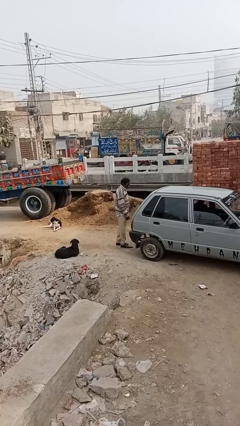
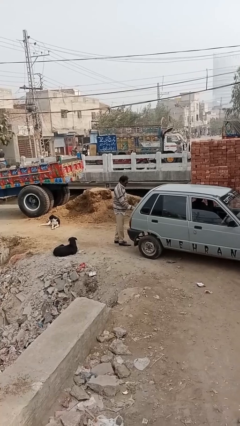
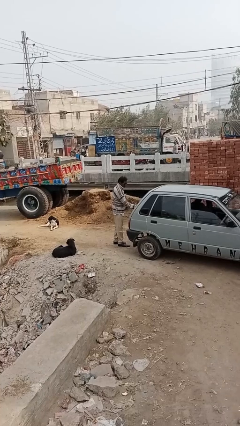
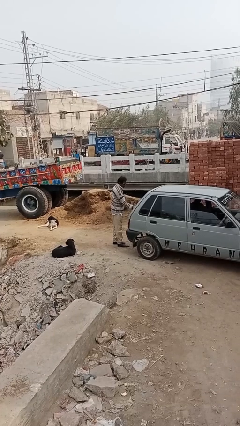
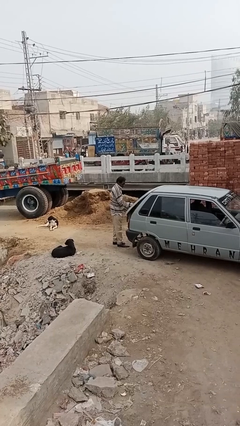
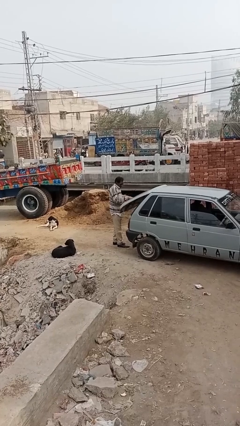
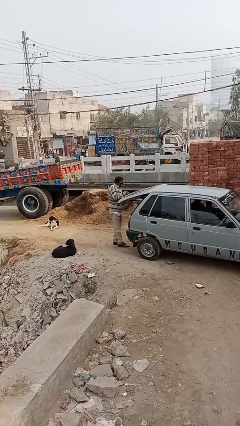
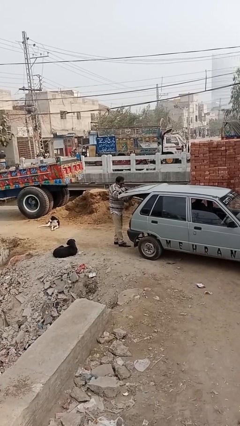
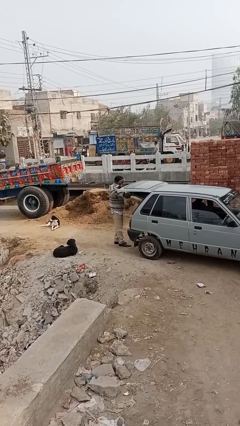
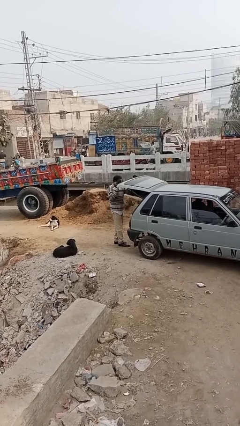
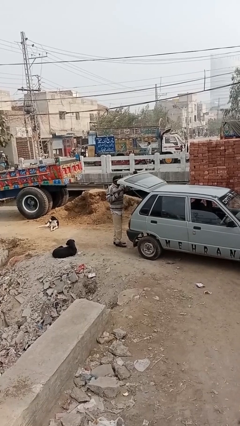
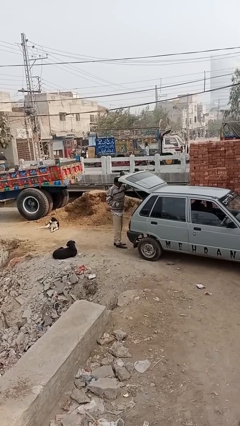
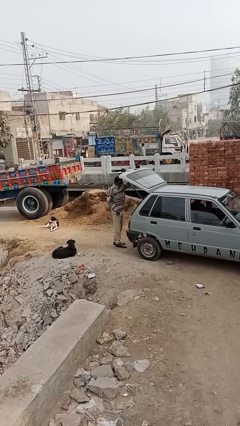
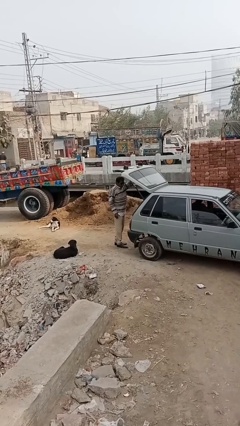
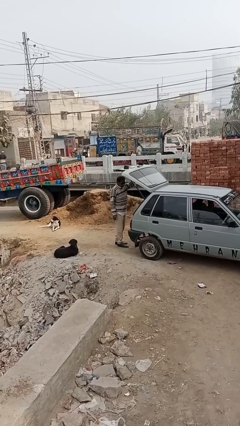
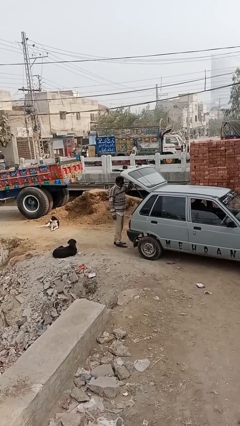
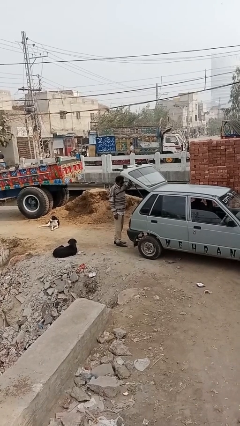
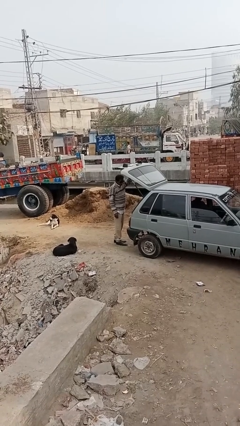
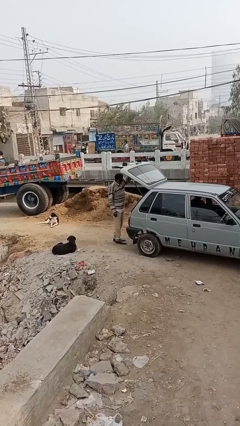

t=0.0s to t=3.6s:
person opens car trunk

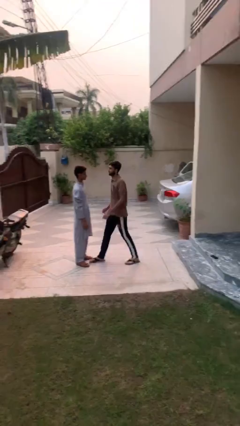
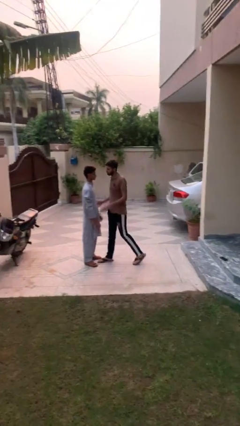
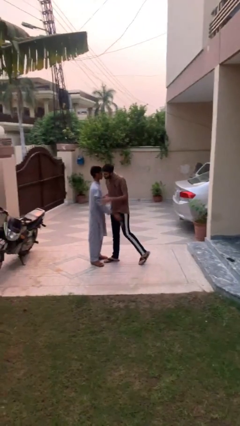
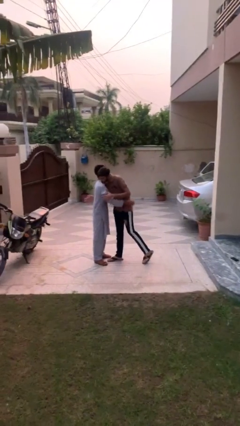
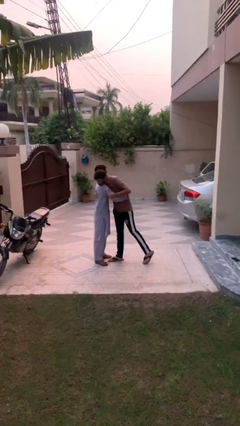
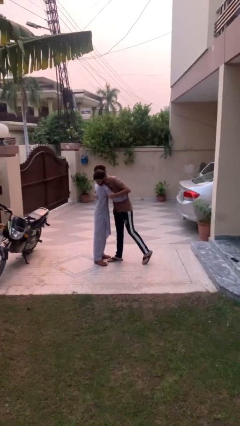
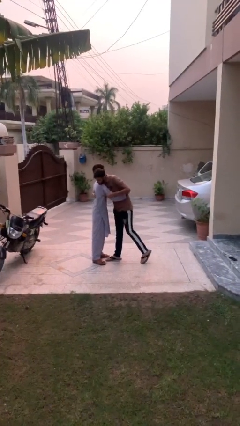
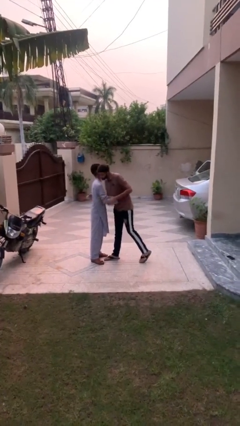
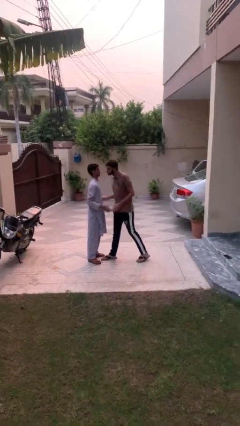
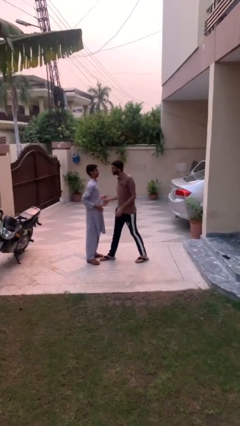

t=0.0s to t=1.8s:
person embraces person

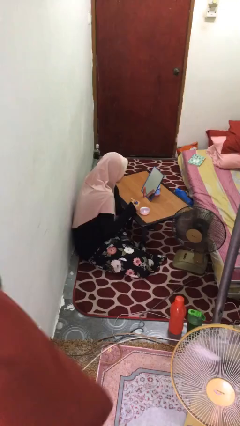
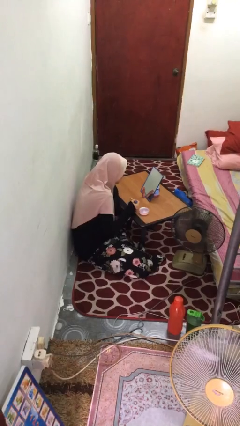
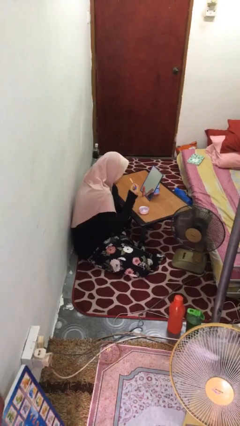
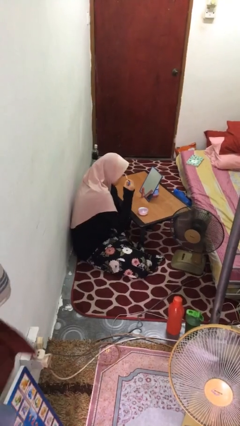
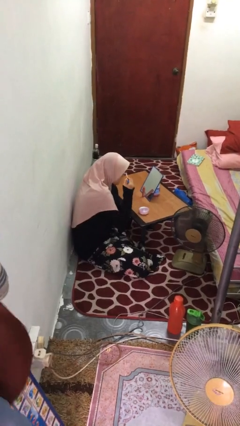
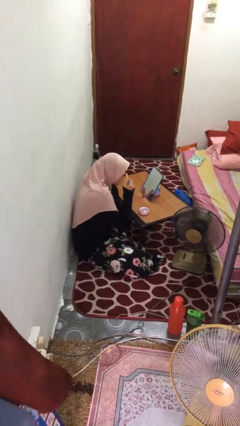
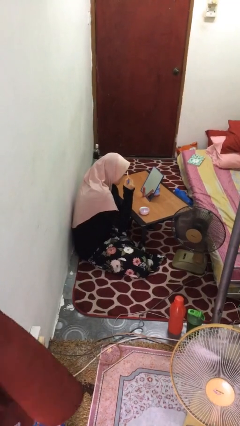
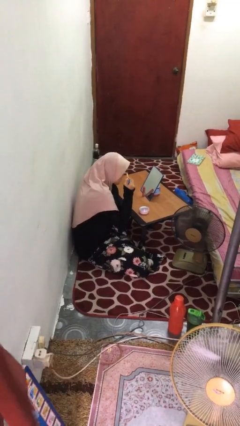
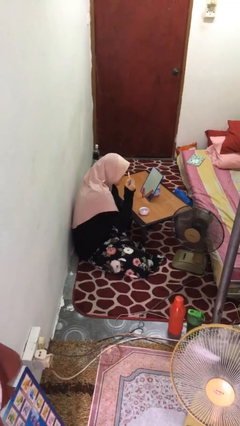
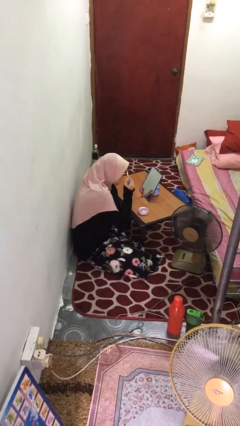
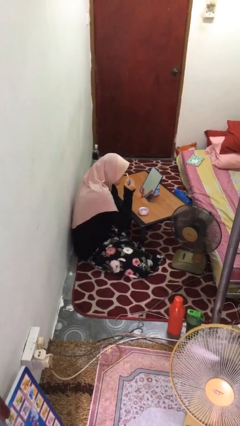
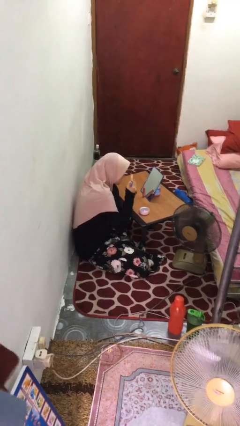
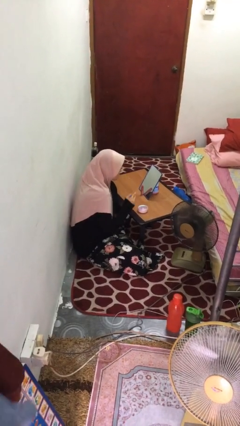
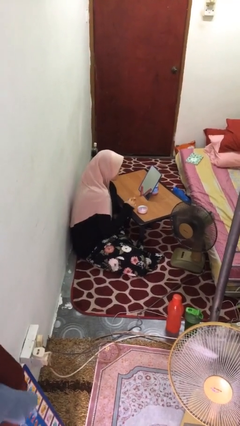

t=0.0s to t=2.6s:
person applies eye makeup

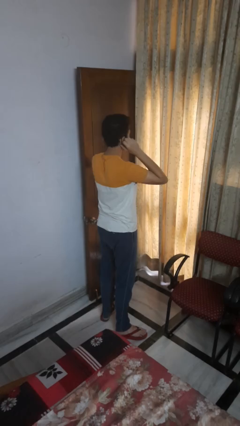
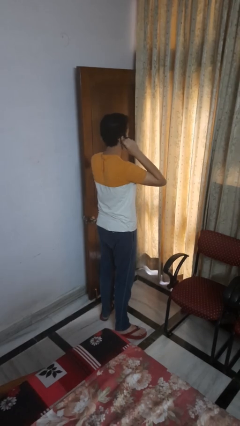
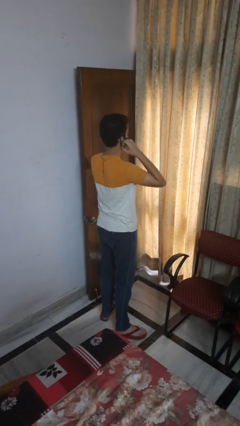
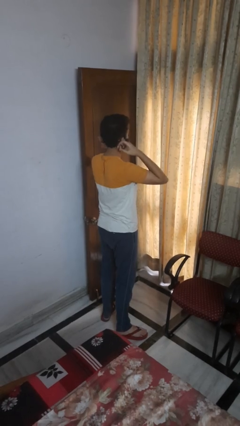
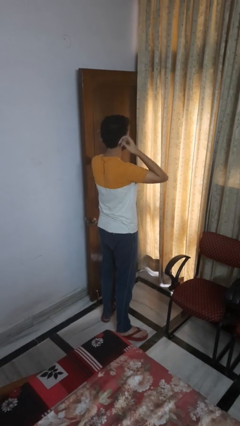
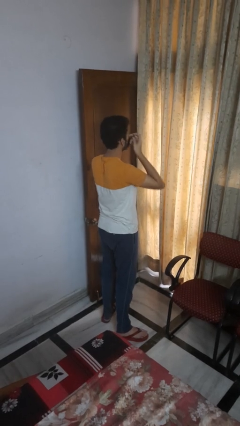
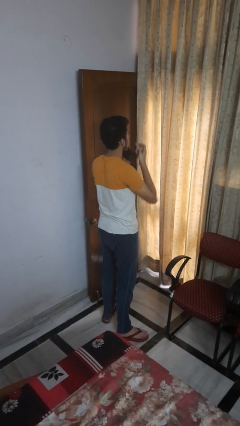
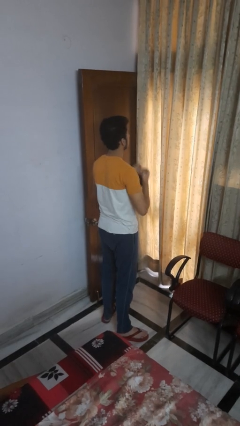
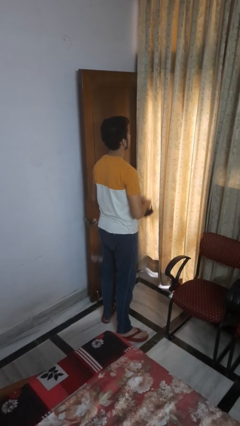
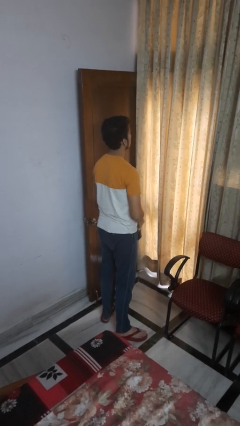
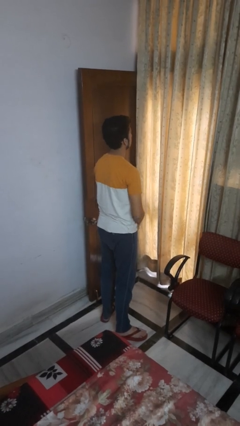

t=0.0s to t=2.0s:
person takes off facemask

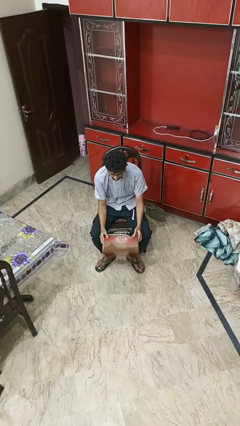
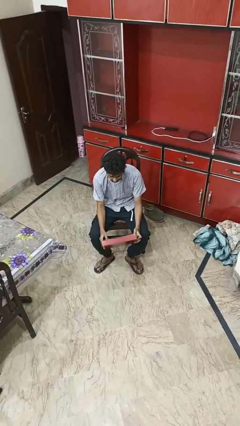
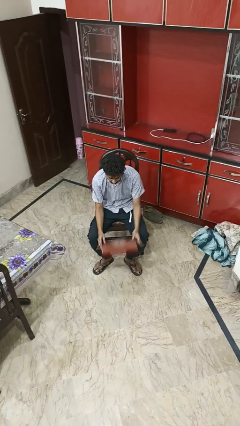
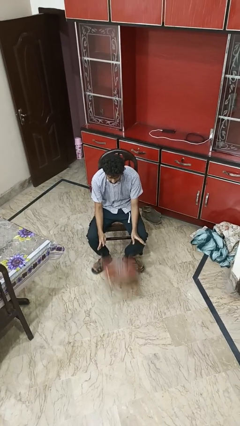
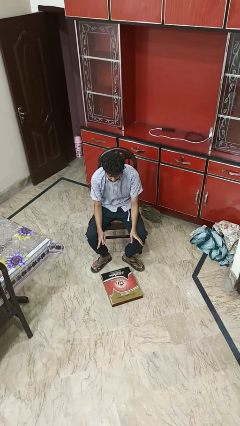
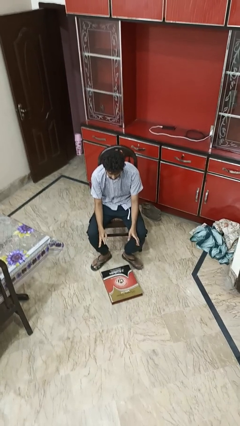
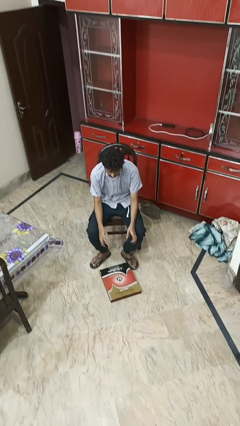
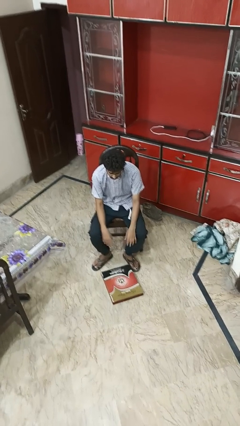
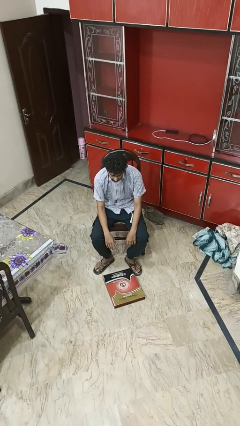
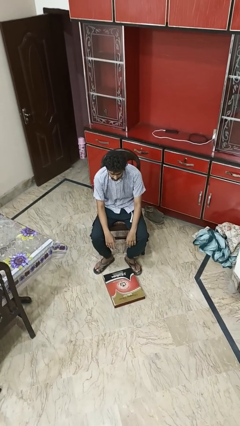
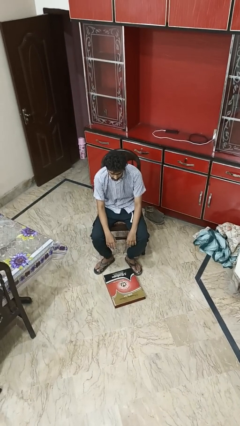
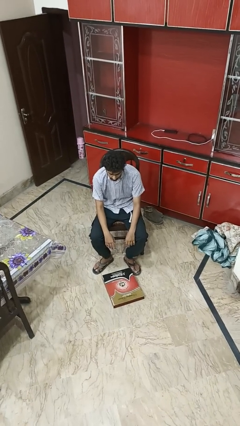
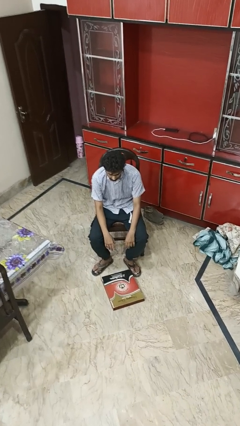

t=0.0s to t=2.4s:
person drops object

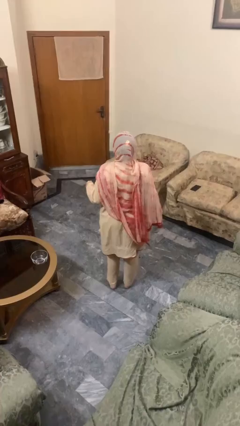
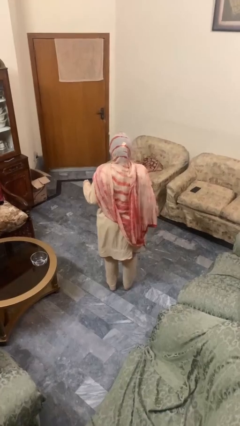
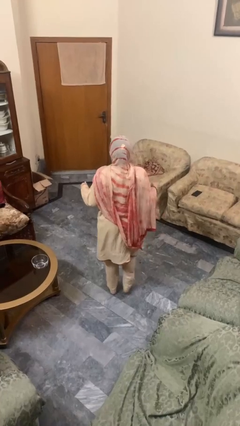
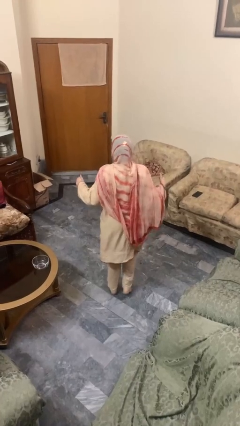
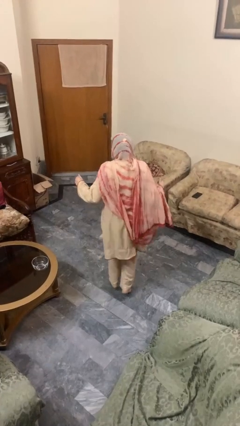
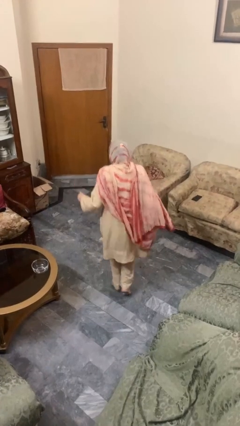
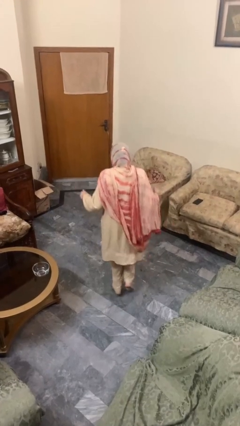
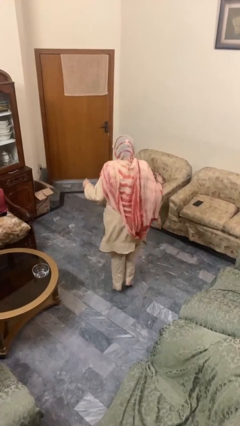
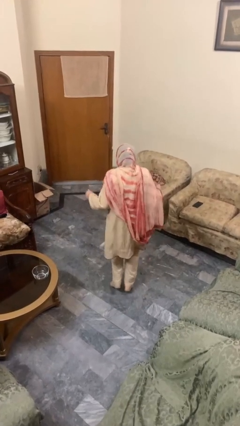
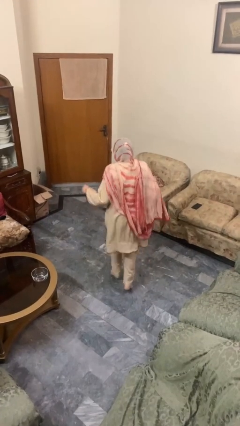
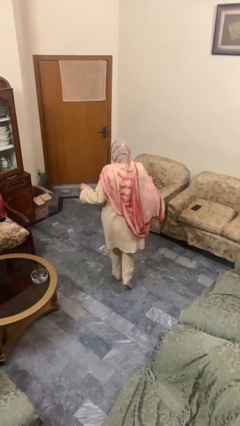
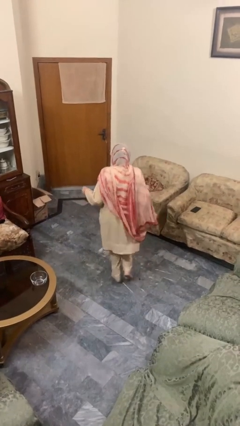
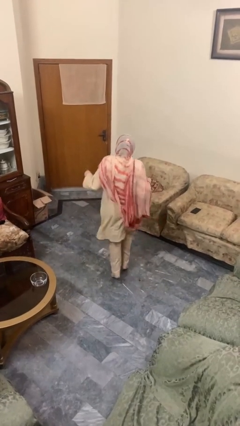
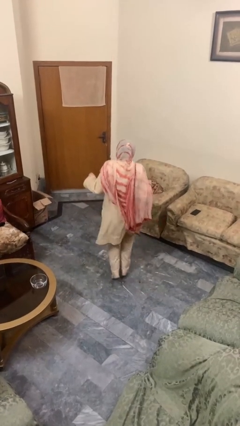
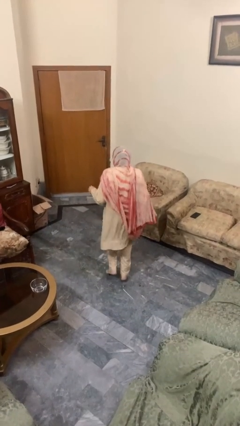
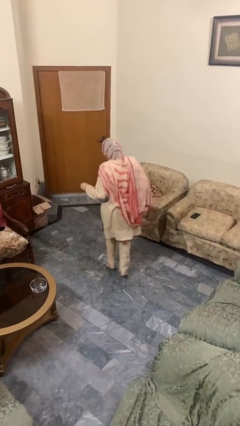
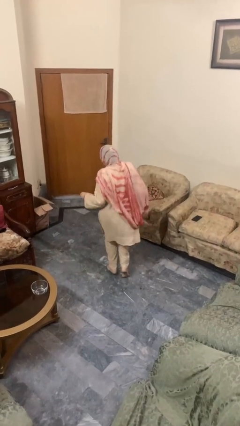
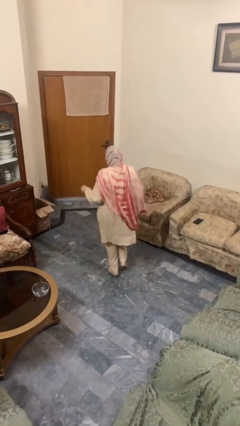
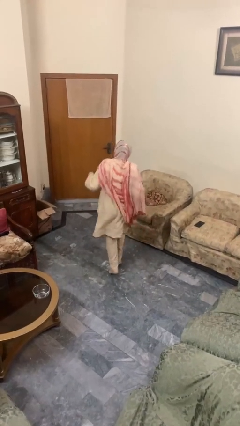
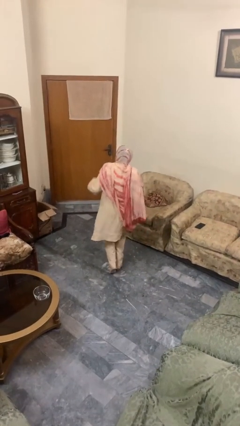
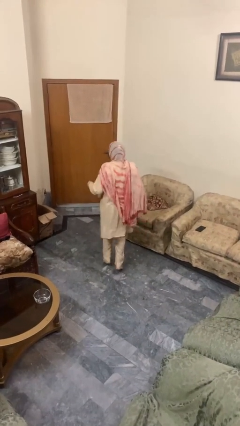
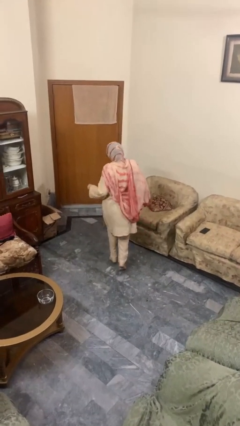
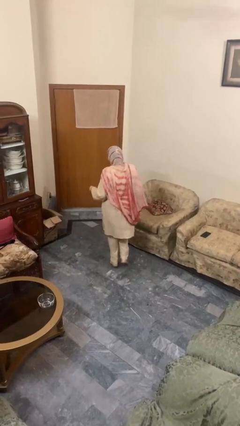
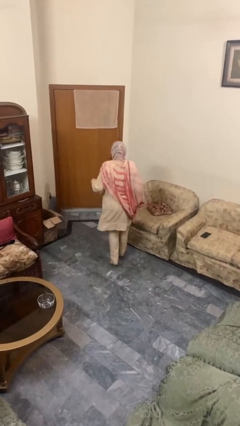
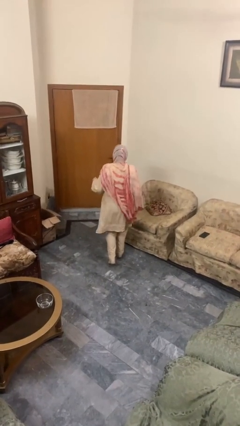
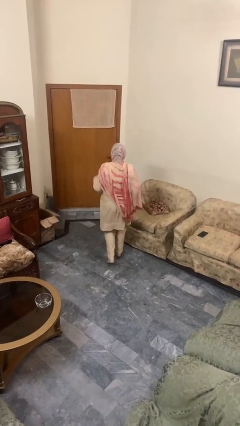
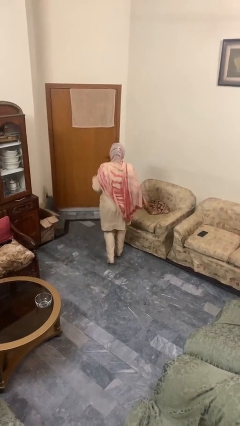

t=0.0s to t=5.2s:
person walks tiptoe
